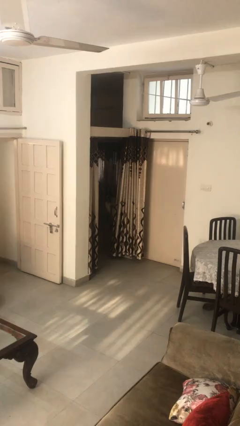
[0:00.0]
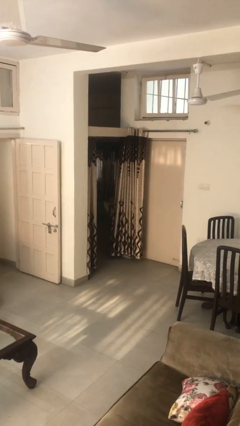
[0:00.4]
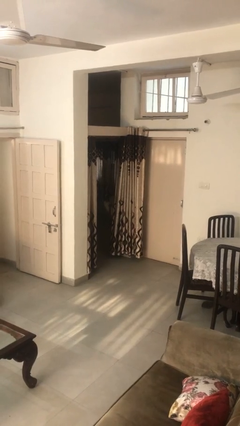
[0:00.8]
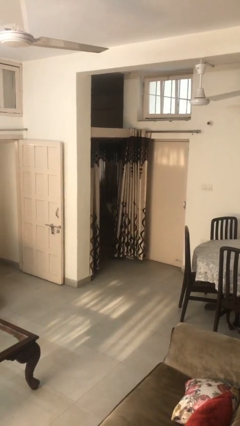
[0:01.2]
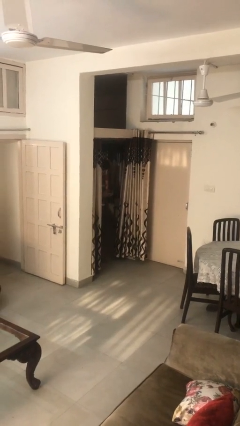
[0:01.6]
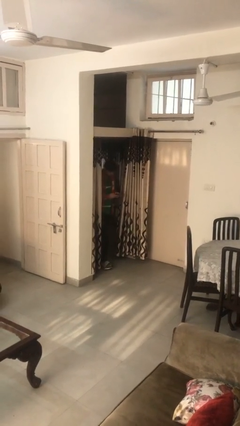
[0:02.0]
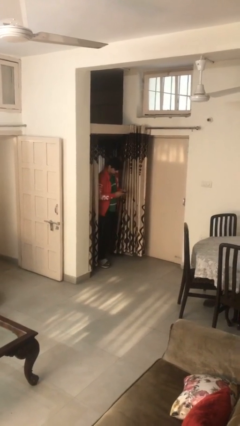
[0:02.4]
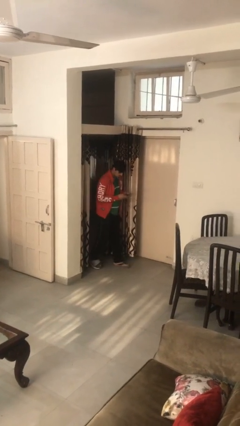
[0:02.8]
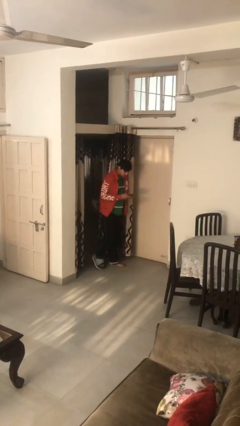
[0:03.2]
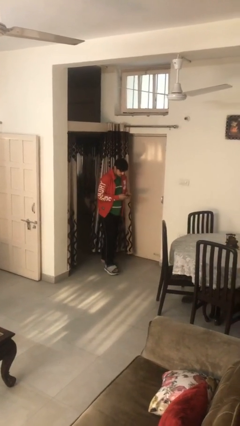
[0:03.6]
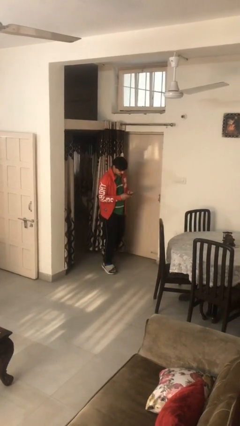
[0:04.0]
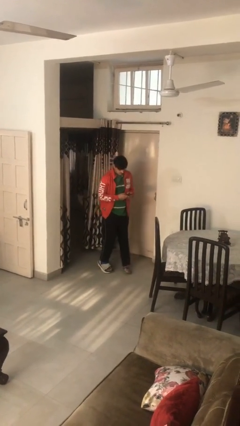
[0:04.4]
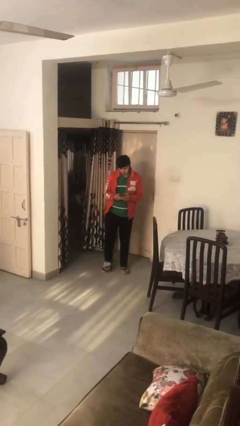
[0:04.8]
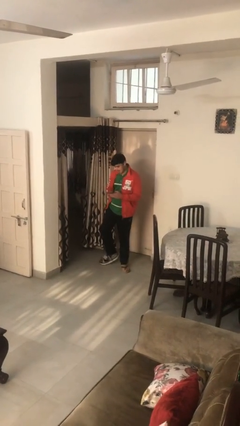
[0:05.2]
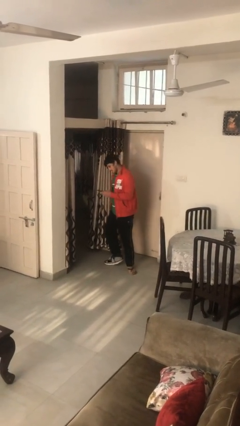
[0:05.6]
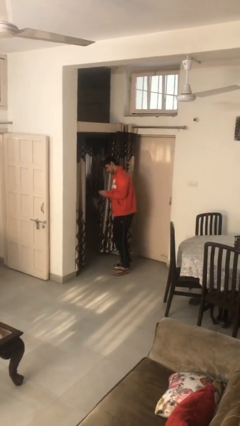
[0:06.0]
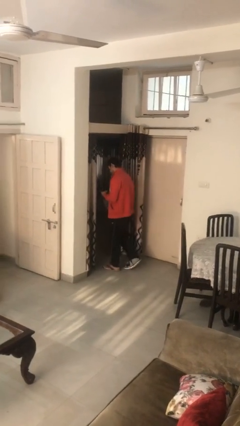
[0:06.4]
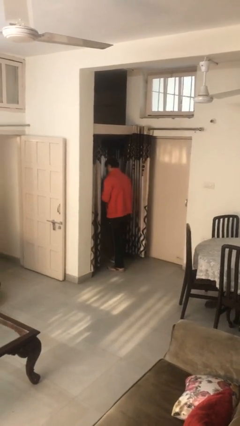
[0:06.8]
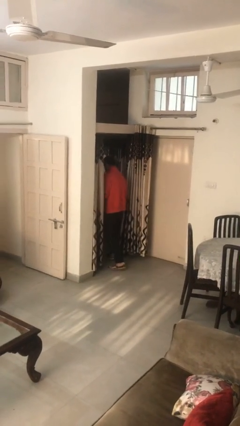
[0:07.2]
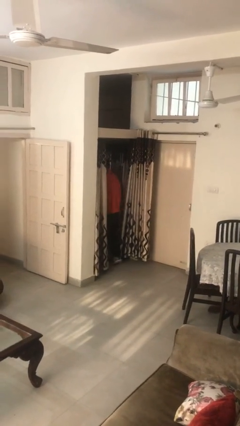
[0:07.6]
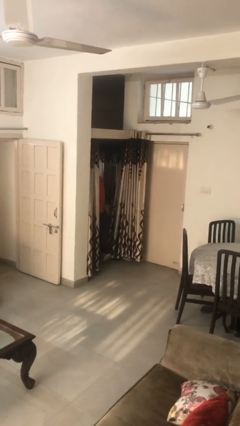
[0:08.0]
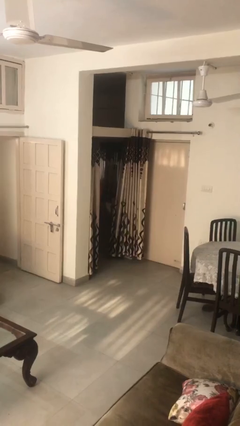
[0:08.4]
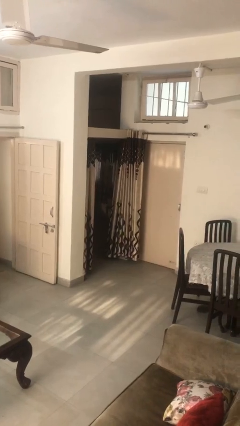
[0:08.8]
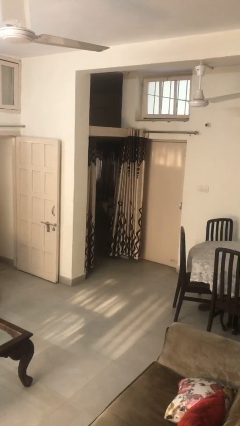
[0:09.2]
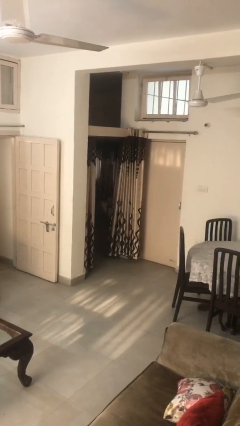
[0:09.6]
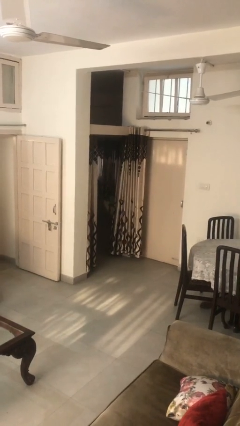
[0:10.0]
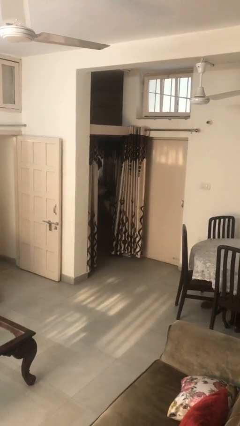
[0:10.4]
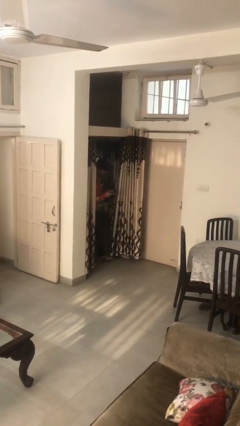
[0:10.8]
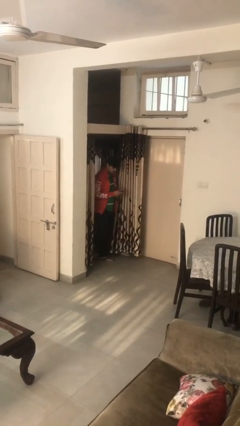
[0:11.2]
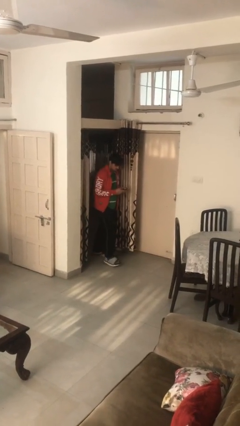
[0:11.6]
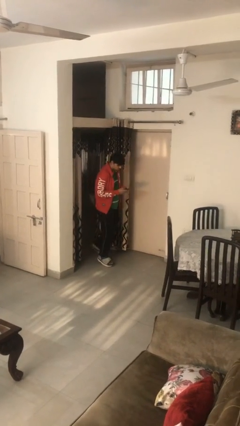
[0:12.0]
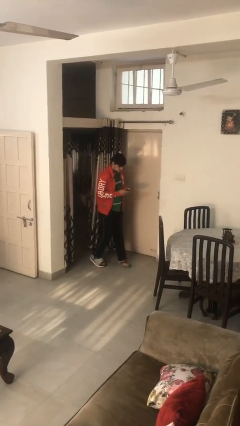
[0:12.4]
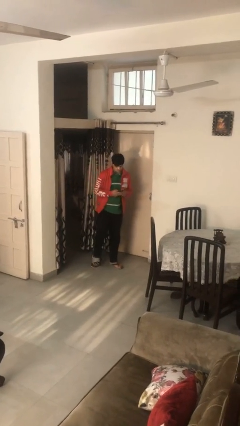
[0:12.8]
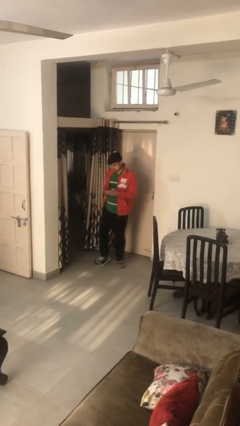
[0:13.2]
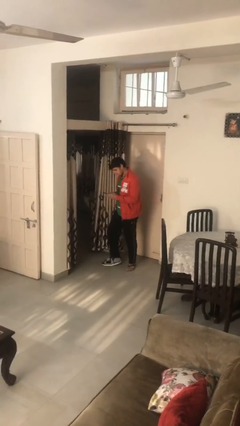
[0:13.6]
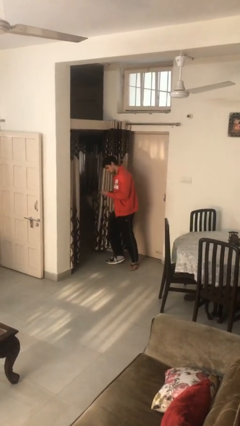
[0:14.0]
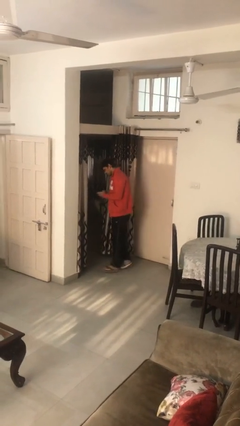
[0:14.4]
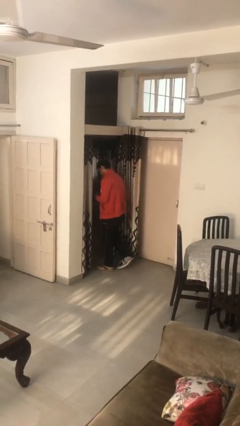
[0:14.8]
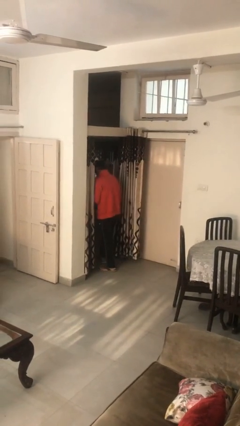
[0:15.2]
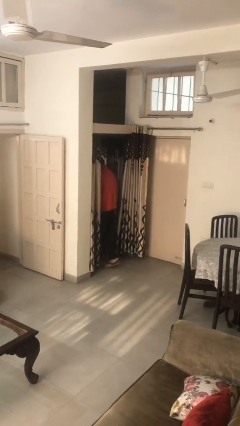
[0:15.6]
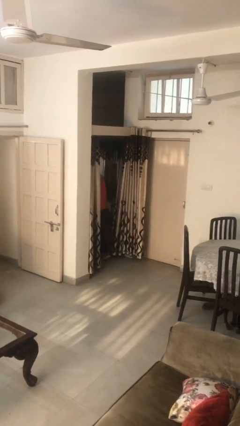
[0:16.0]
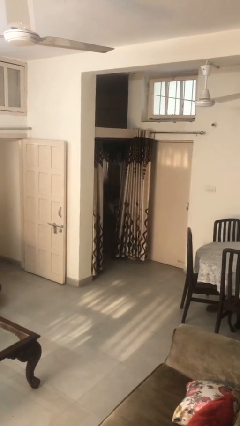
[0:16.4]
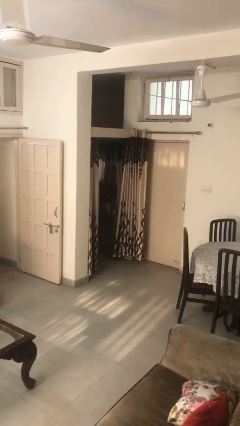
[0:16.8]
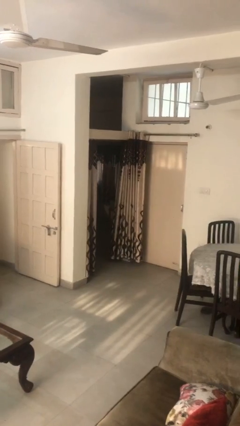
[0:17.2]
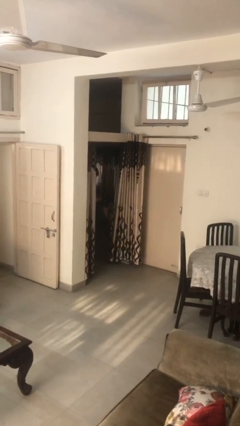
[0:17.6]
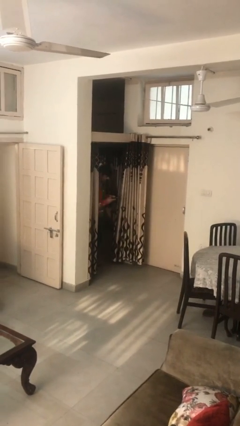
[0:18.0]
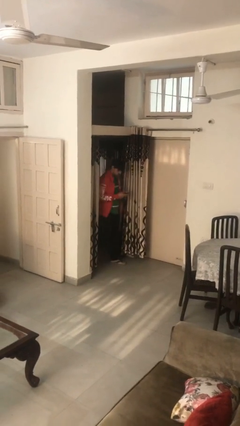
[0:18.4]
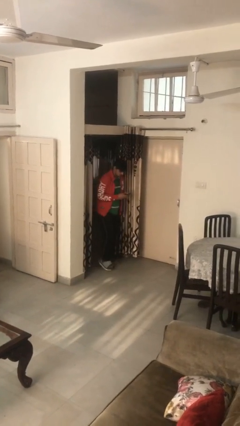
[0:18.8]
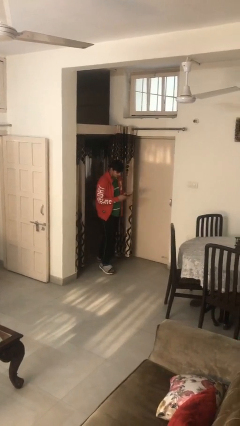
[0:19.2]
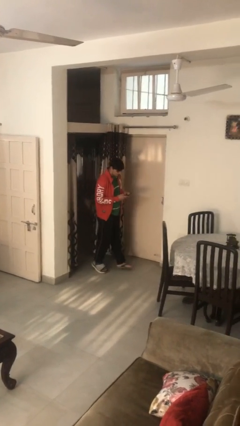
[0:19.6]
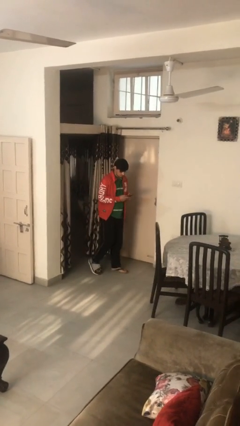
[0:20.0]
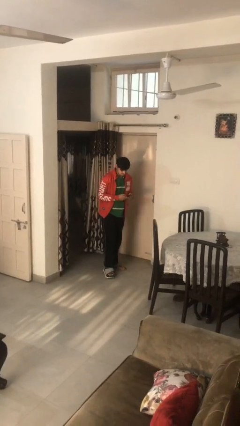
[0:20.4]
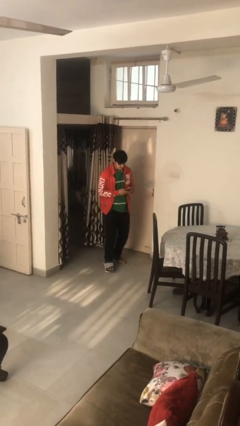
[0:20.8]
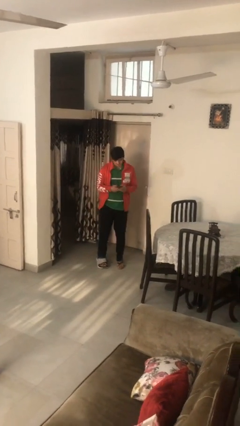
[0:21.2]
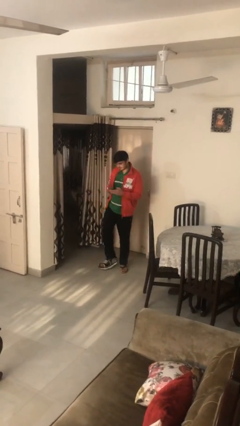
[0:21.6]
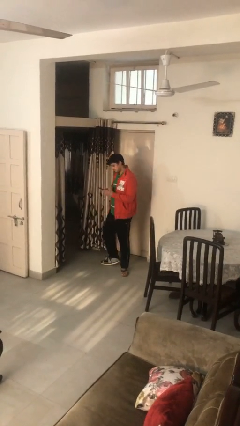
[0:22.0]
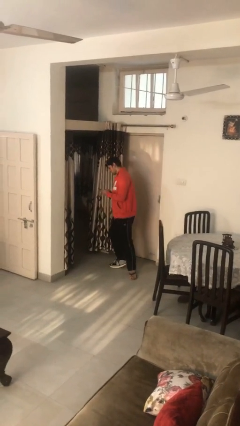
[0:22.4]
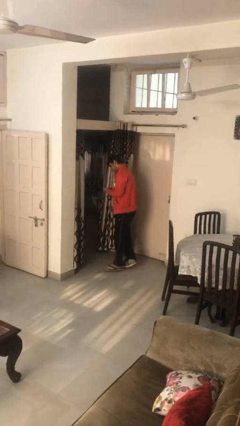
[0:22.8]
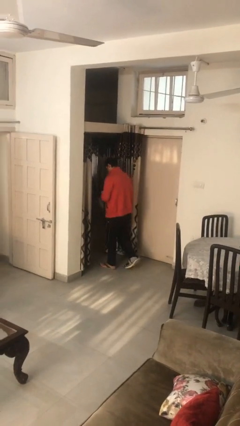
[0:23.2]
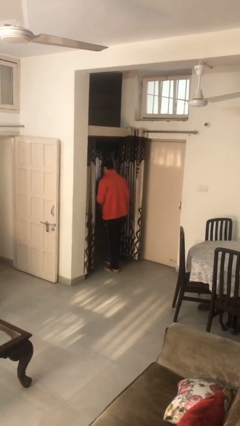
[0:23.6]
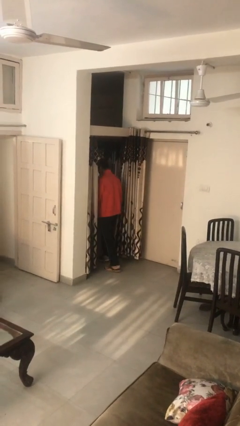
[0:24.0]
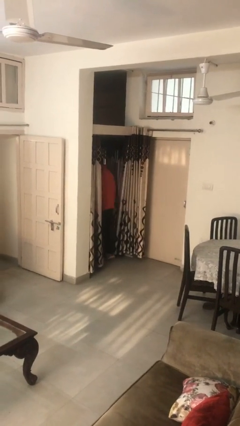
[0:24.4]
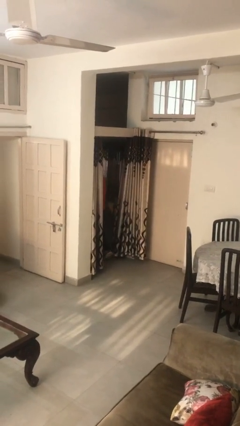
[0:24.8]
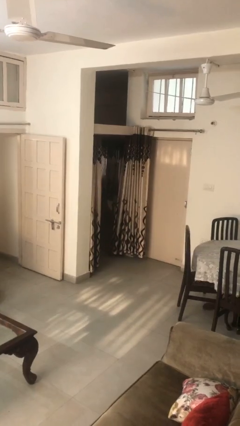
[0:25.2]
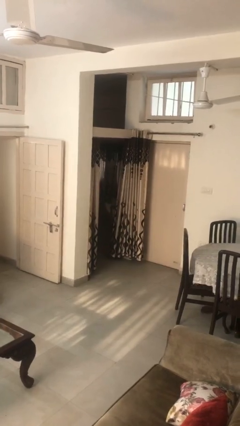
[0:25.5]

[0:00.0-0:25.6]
person texts on phone

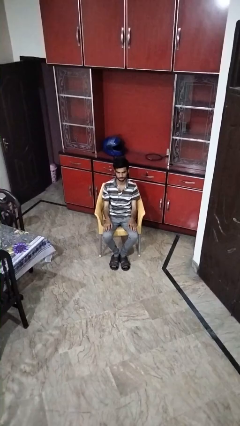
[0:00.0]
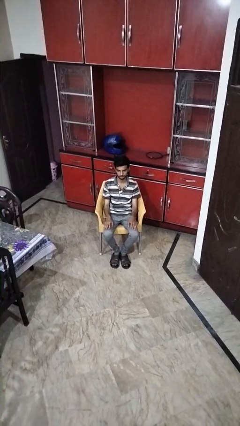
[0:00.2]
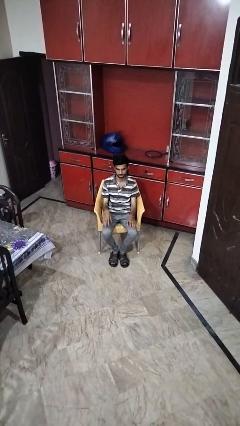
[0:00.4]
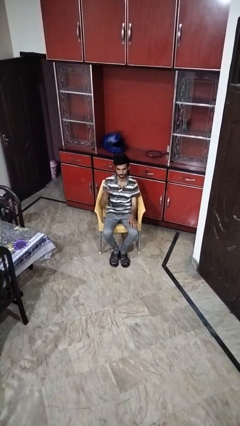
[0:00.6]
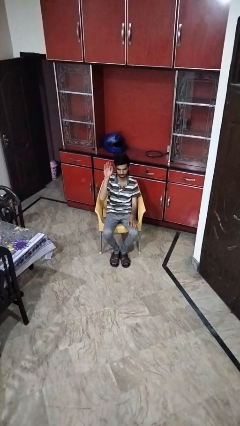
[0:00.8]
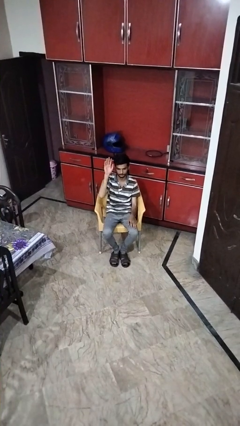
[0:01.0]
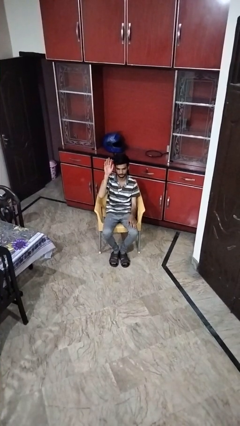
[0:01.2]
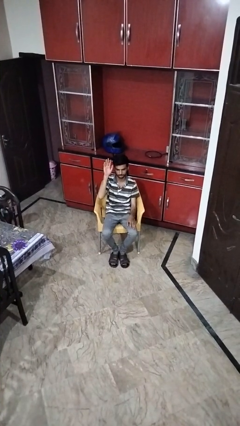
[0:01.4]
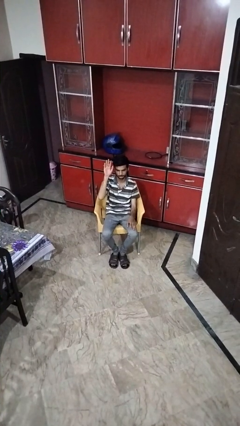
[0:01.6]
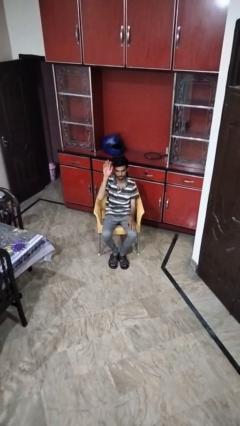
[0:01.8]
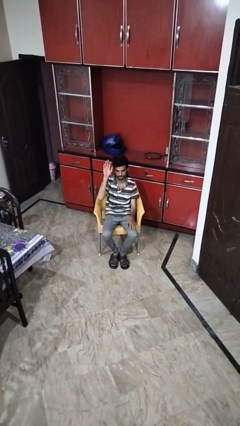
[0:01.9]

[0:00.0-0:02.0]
person gestures raise hand

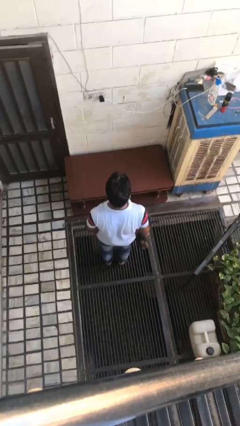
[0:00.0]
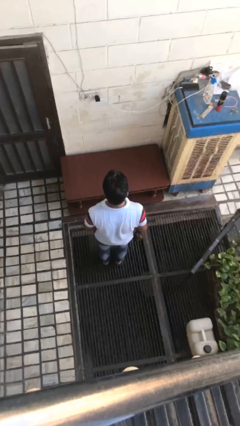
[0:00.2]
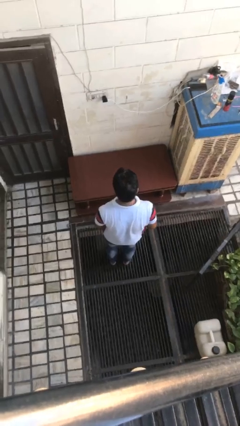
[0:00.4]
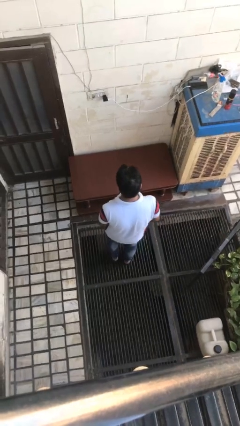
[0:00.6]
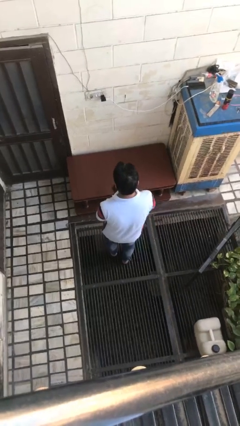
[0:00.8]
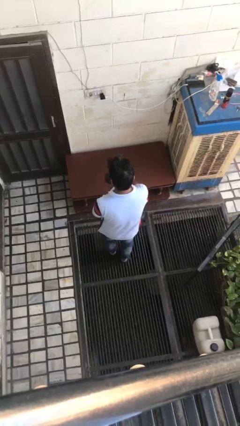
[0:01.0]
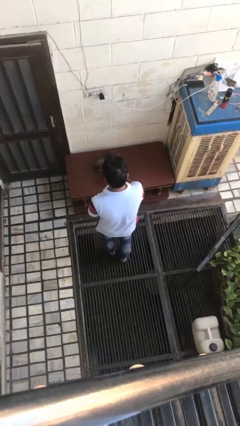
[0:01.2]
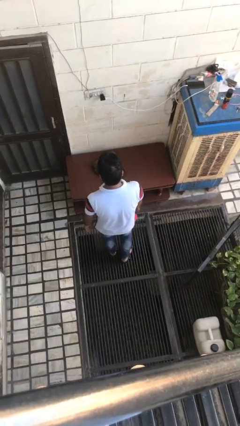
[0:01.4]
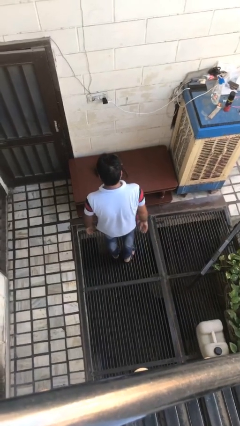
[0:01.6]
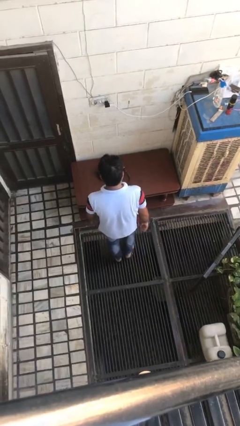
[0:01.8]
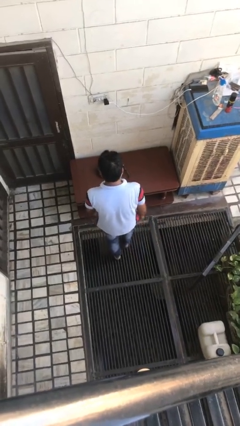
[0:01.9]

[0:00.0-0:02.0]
person throws object on table

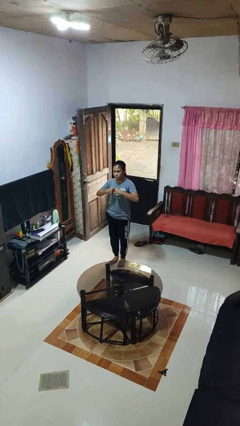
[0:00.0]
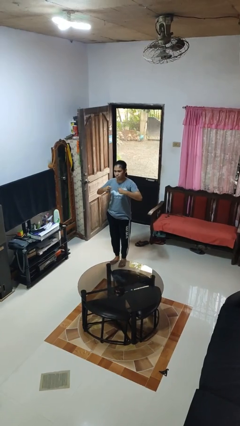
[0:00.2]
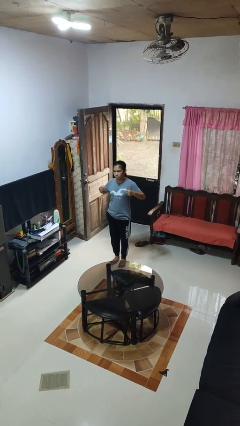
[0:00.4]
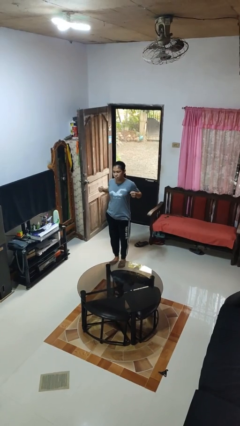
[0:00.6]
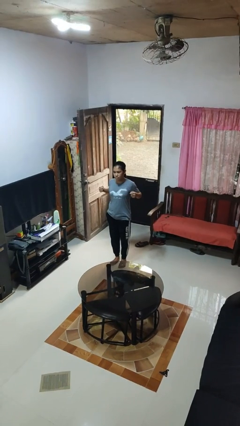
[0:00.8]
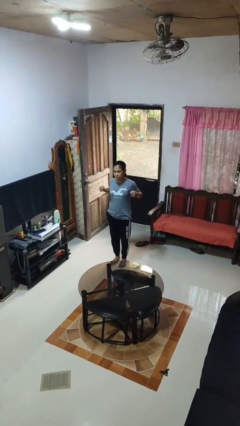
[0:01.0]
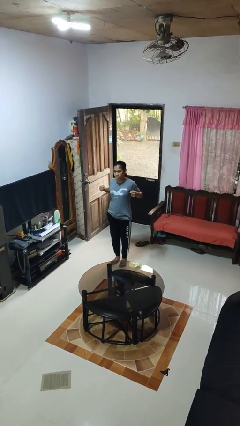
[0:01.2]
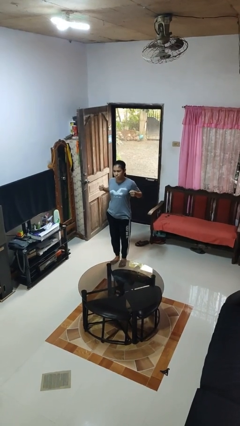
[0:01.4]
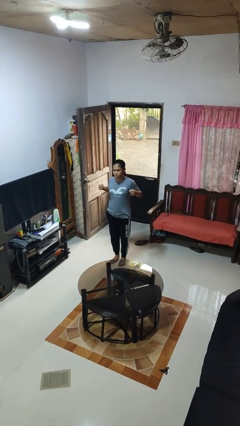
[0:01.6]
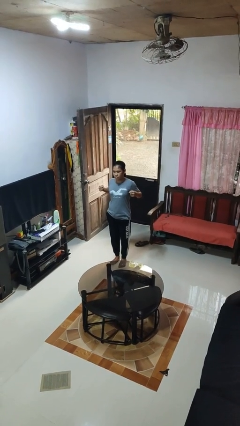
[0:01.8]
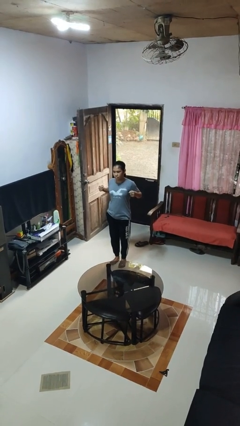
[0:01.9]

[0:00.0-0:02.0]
person gestures zoom in
